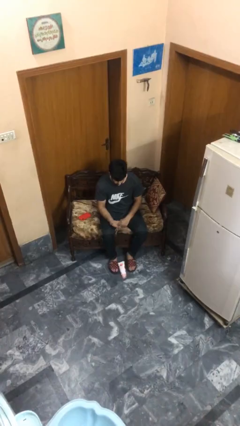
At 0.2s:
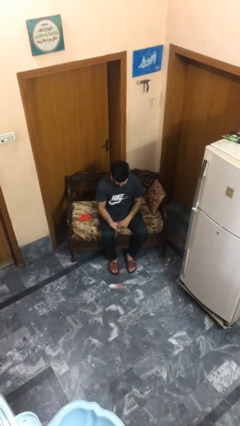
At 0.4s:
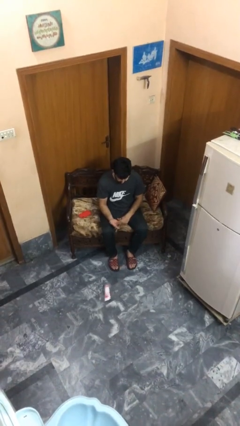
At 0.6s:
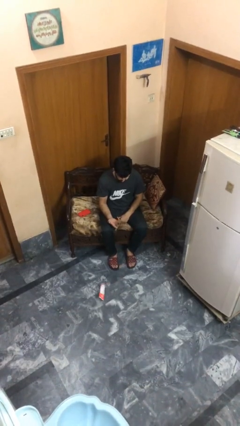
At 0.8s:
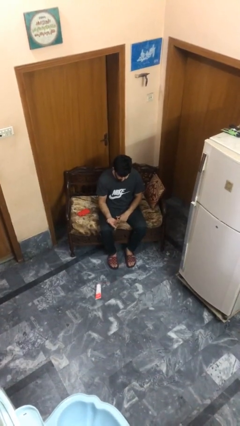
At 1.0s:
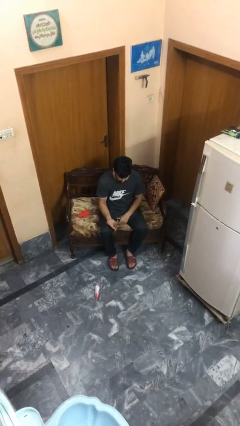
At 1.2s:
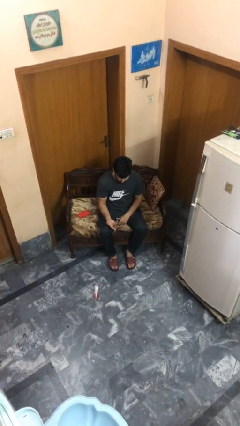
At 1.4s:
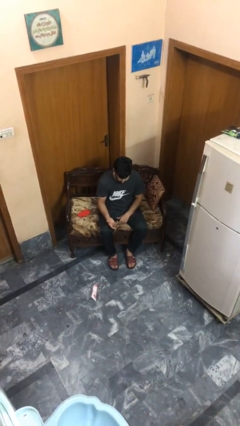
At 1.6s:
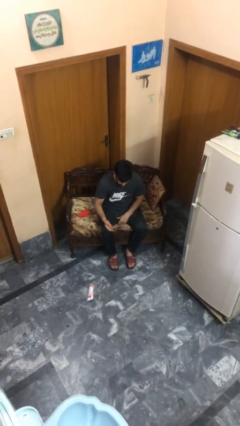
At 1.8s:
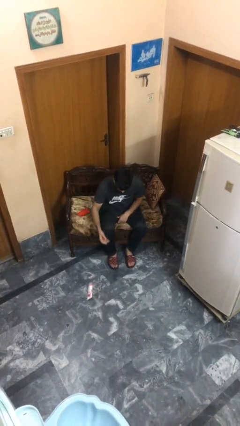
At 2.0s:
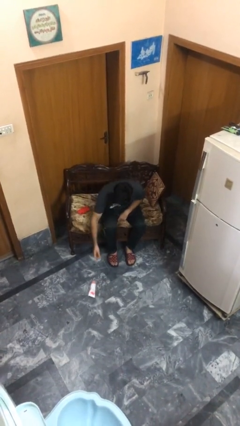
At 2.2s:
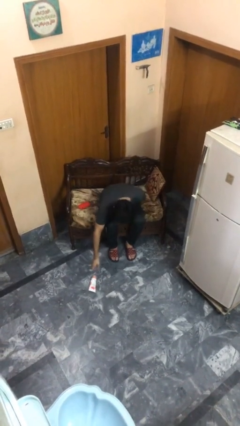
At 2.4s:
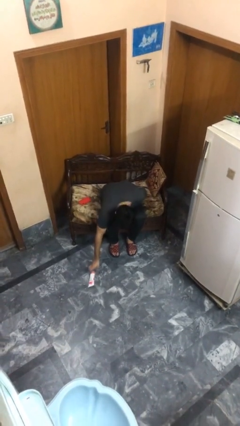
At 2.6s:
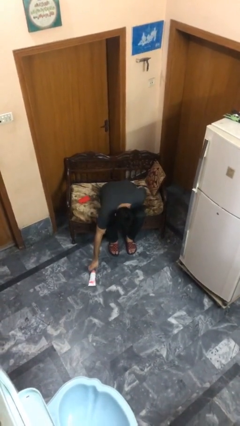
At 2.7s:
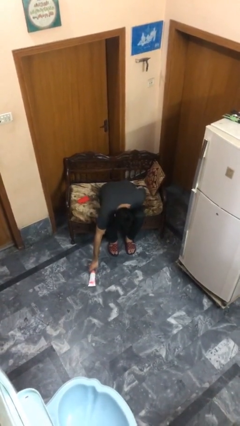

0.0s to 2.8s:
person drops object

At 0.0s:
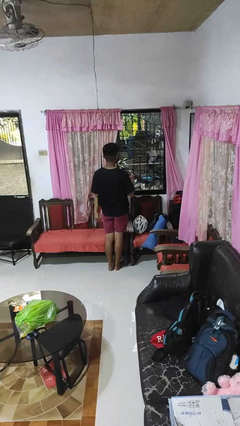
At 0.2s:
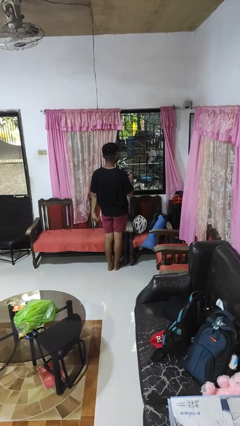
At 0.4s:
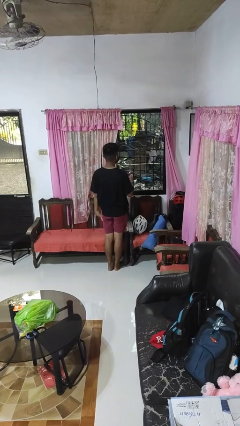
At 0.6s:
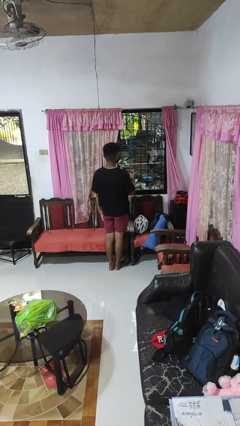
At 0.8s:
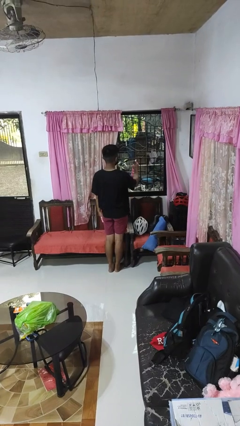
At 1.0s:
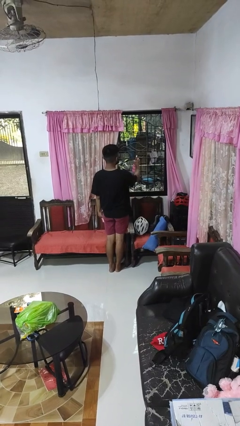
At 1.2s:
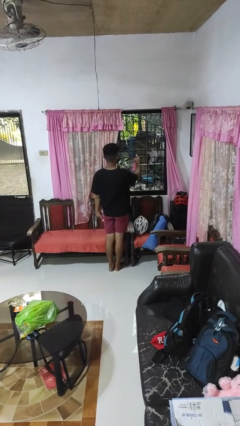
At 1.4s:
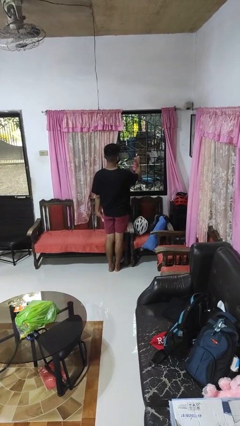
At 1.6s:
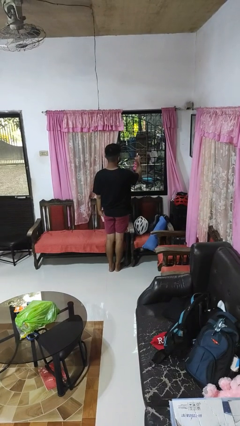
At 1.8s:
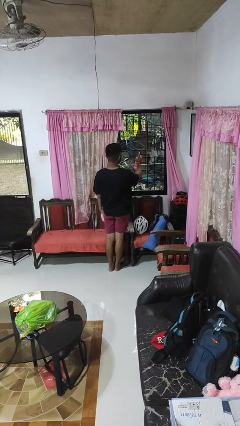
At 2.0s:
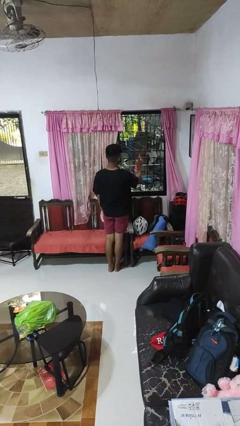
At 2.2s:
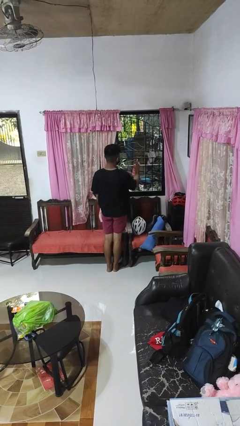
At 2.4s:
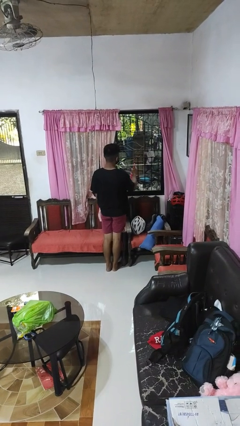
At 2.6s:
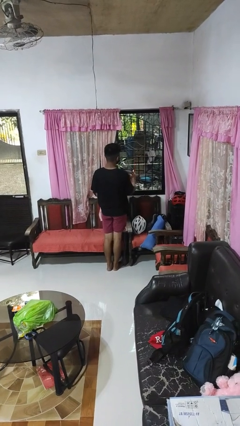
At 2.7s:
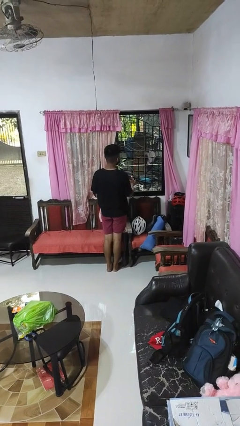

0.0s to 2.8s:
person sprays from bottle

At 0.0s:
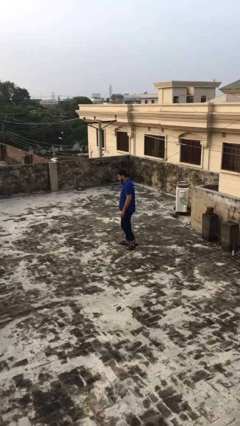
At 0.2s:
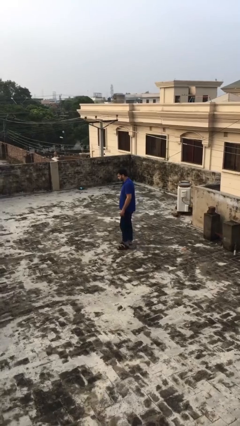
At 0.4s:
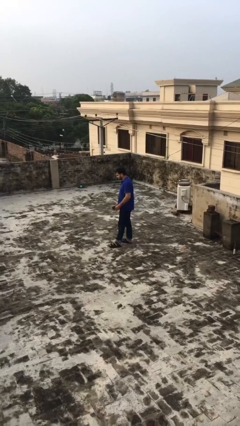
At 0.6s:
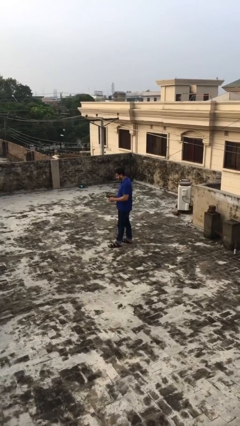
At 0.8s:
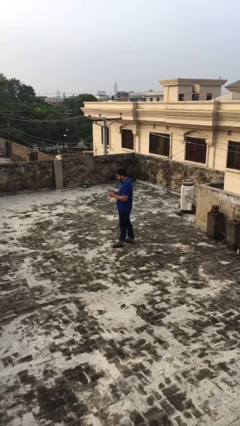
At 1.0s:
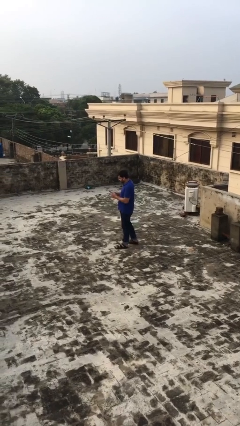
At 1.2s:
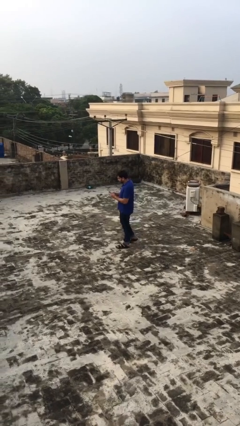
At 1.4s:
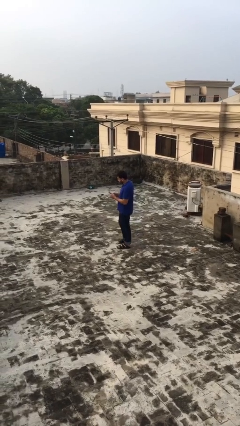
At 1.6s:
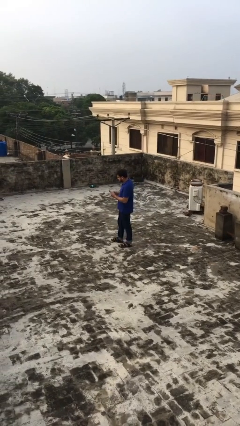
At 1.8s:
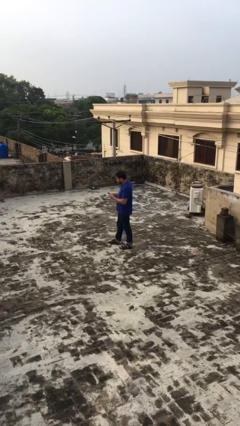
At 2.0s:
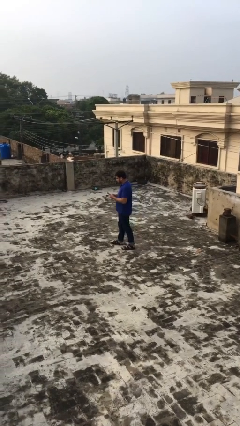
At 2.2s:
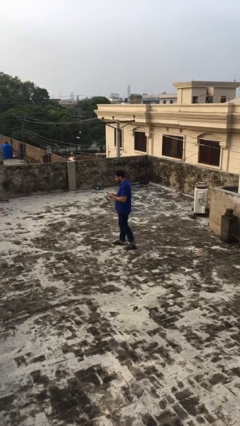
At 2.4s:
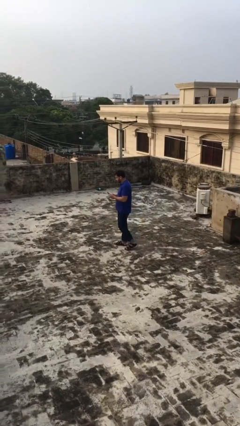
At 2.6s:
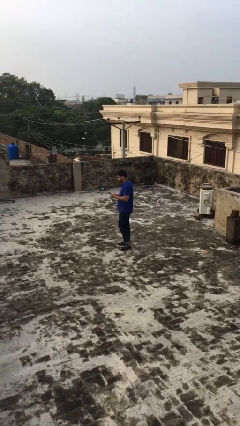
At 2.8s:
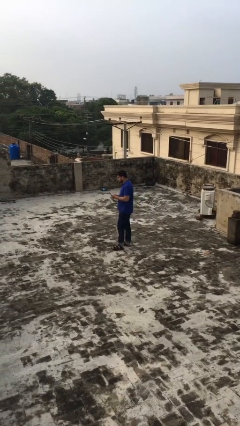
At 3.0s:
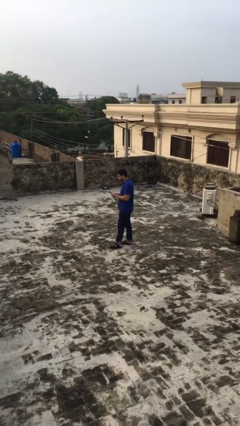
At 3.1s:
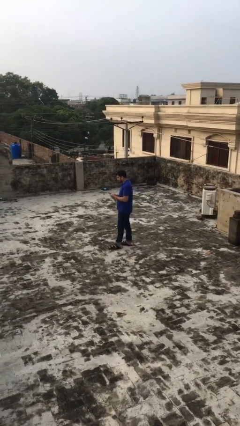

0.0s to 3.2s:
person texts on phone

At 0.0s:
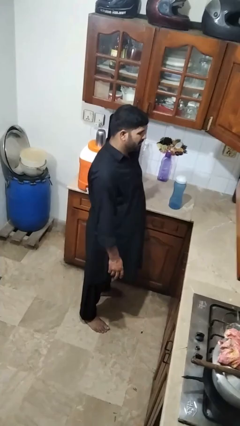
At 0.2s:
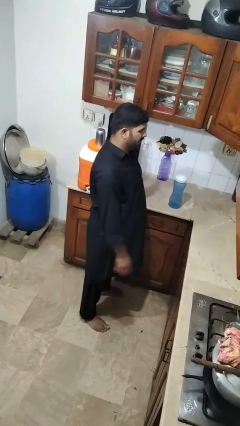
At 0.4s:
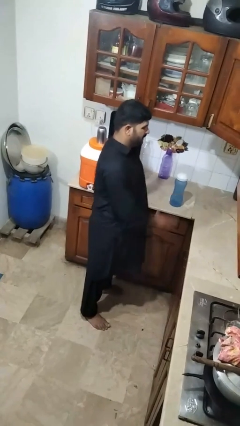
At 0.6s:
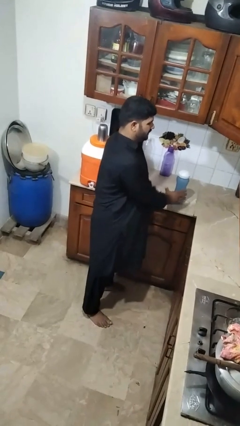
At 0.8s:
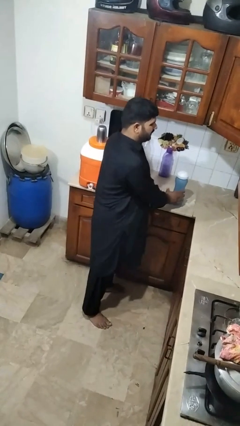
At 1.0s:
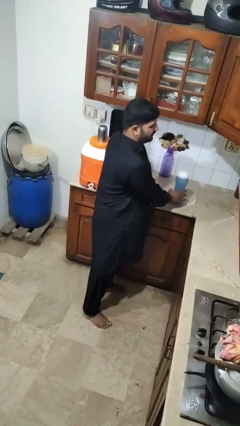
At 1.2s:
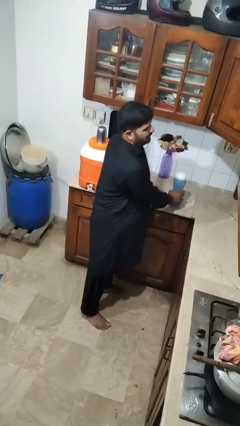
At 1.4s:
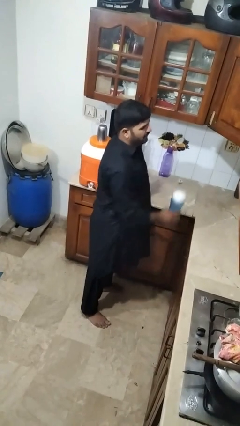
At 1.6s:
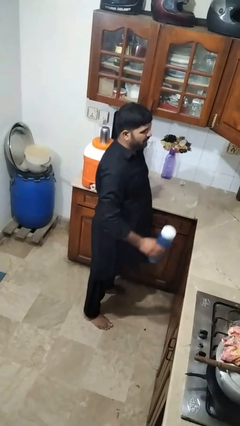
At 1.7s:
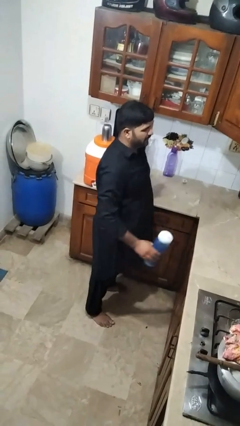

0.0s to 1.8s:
person picks up object from countertop

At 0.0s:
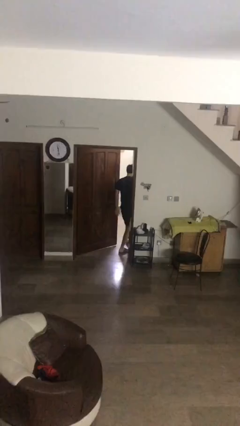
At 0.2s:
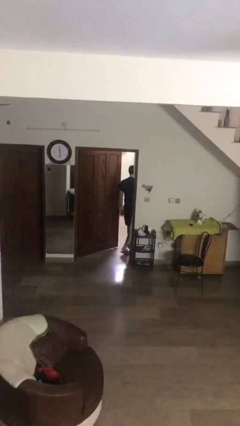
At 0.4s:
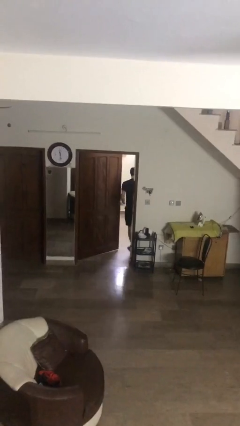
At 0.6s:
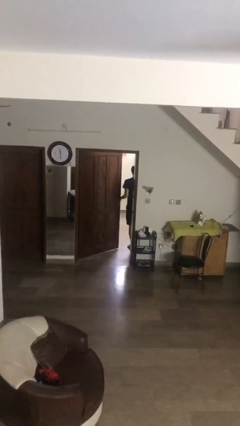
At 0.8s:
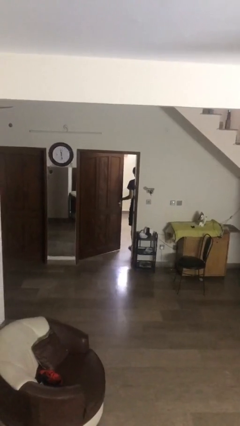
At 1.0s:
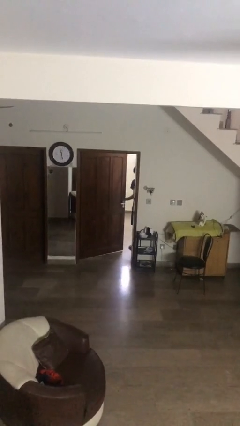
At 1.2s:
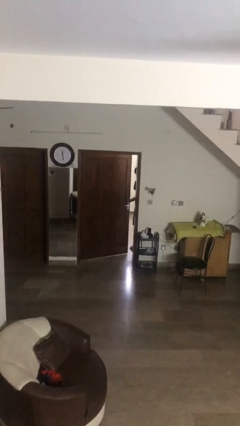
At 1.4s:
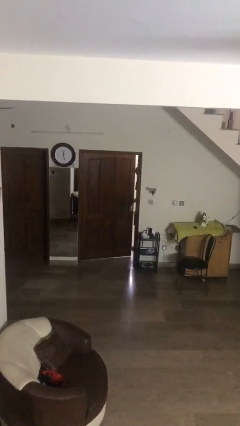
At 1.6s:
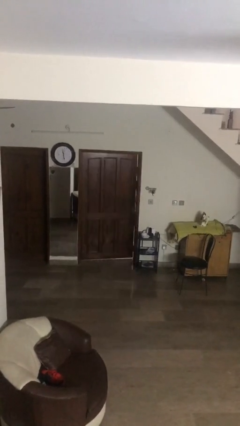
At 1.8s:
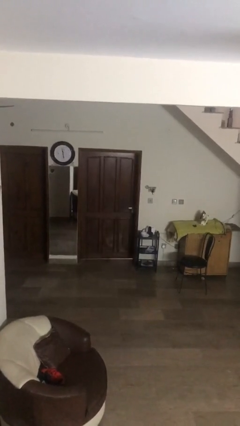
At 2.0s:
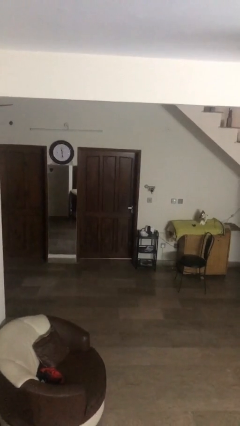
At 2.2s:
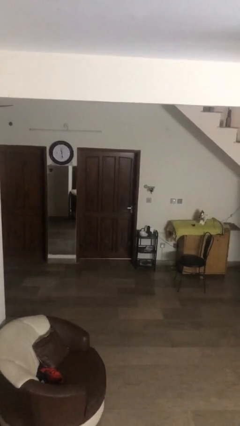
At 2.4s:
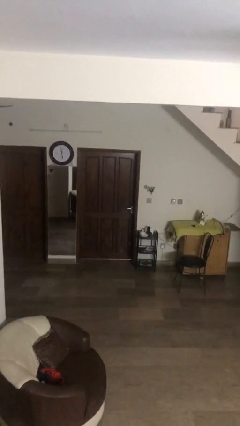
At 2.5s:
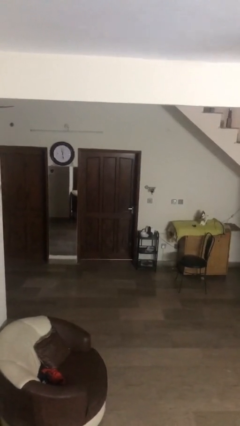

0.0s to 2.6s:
person closes facility door

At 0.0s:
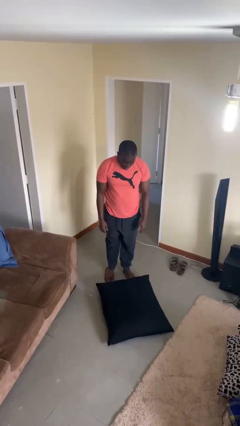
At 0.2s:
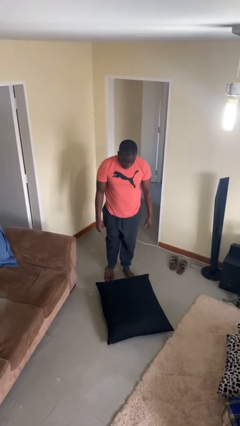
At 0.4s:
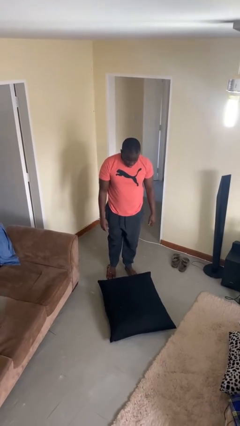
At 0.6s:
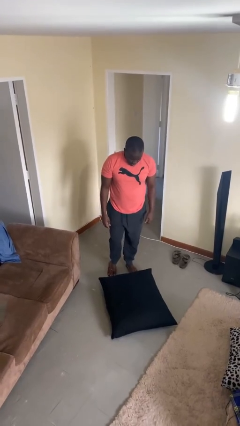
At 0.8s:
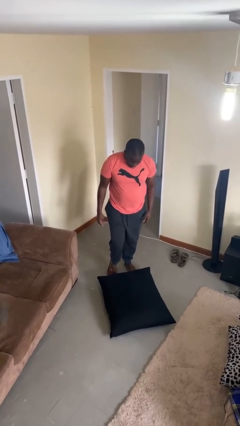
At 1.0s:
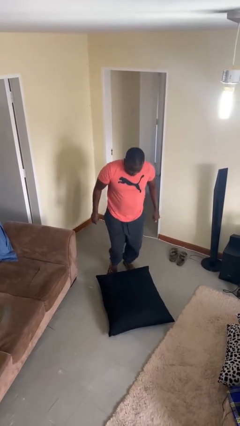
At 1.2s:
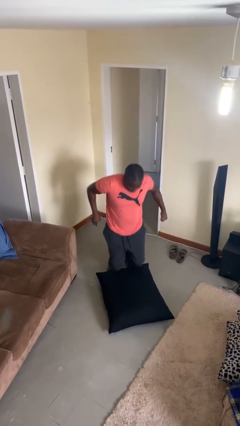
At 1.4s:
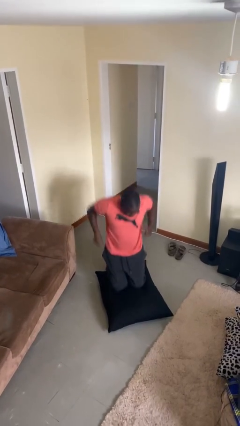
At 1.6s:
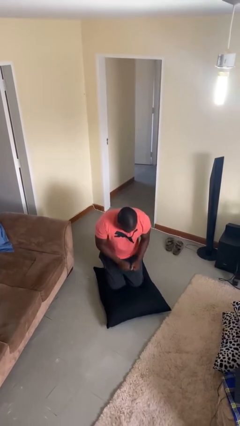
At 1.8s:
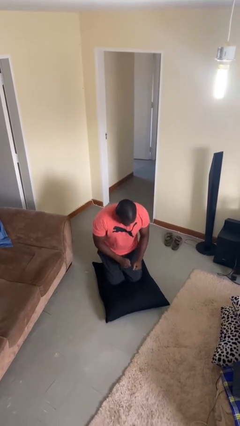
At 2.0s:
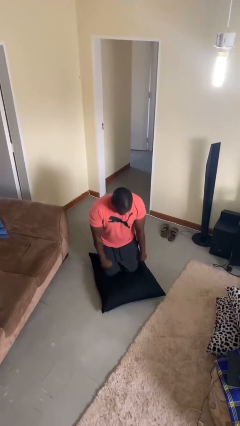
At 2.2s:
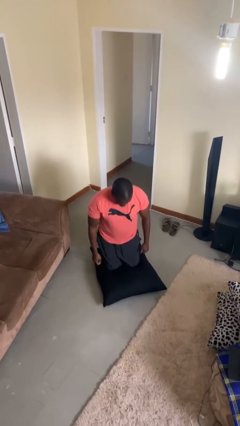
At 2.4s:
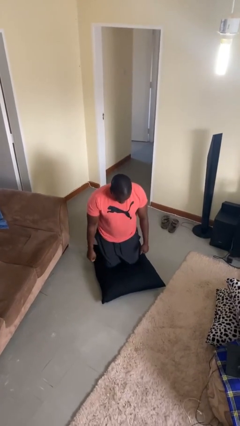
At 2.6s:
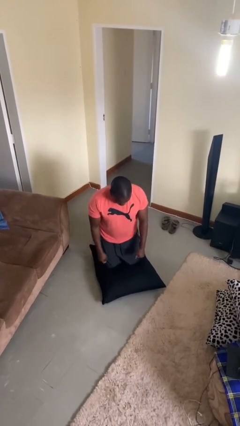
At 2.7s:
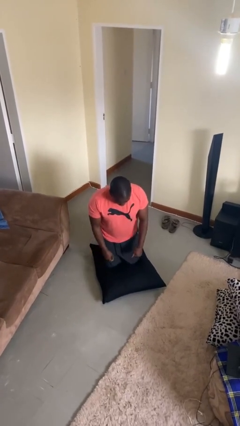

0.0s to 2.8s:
person trips on object on floor

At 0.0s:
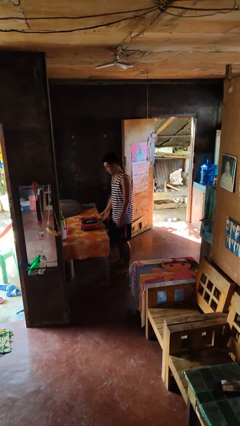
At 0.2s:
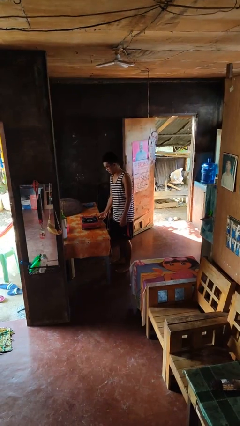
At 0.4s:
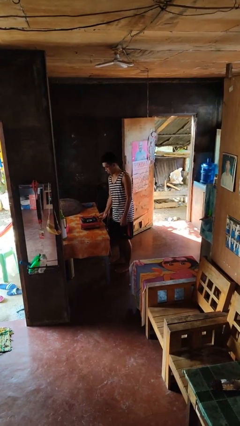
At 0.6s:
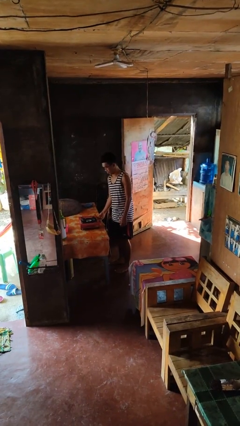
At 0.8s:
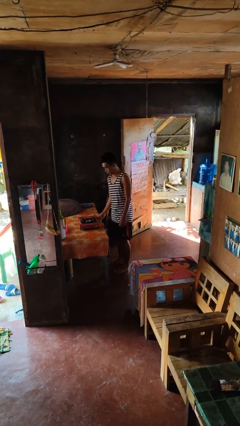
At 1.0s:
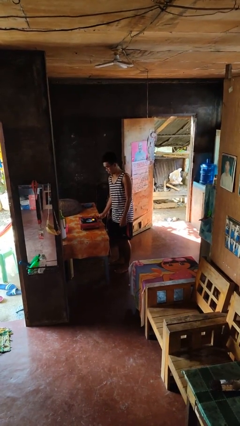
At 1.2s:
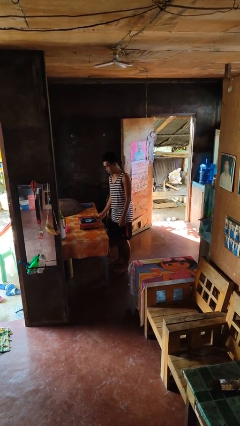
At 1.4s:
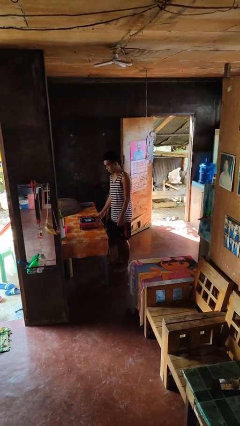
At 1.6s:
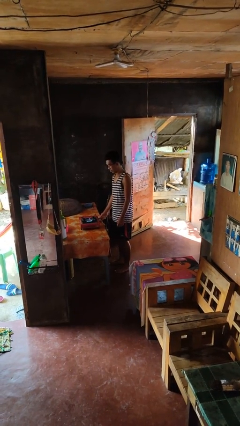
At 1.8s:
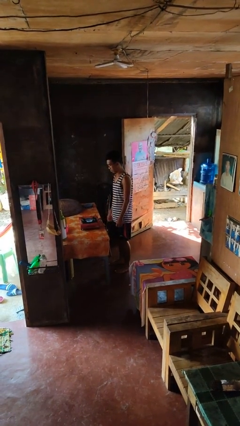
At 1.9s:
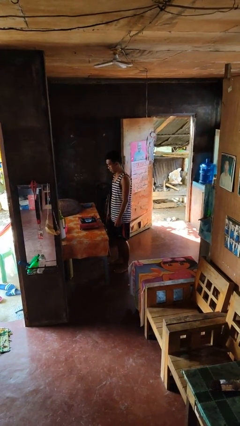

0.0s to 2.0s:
person turns on stovetop
